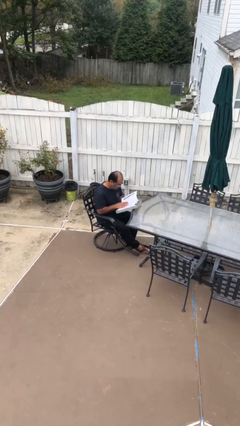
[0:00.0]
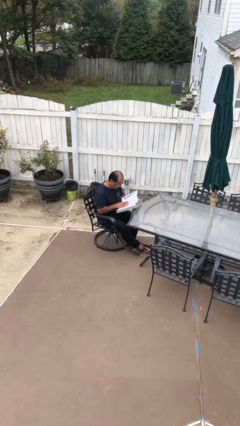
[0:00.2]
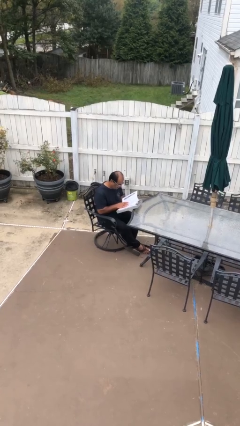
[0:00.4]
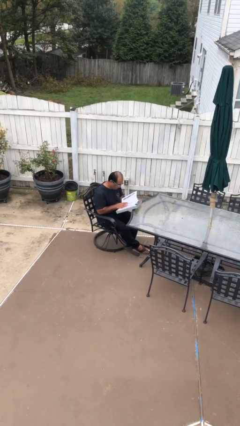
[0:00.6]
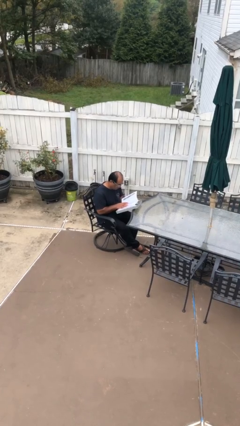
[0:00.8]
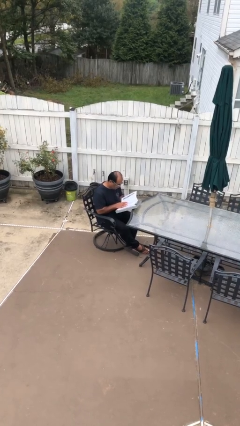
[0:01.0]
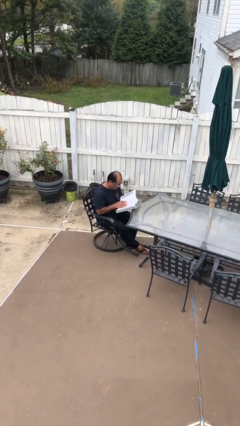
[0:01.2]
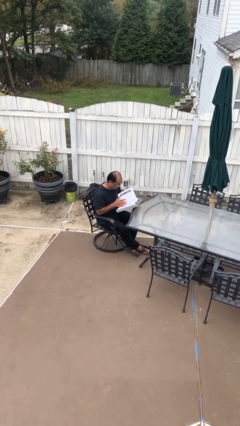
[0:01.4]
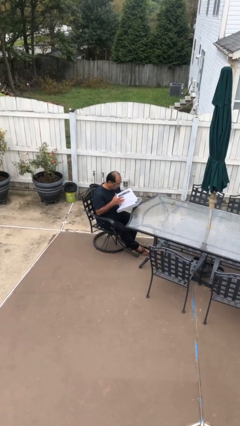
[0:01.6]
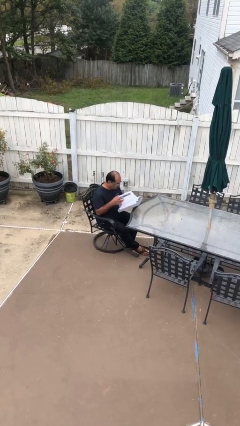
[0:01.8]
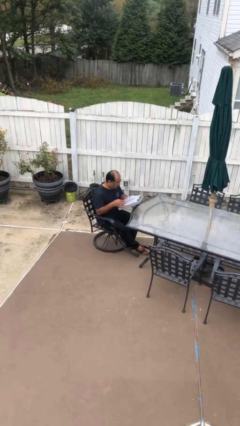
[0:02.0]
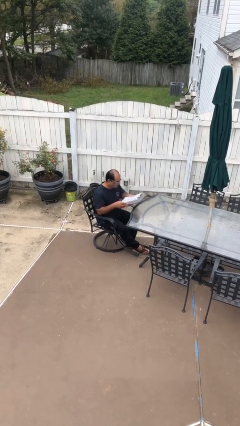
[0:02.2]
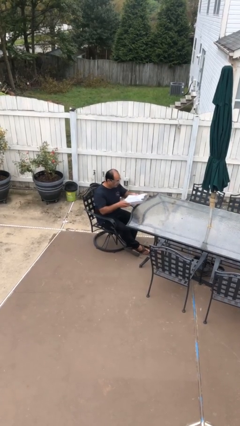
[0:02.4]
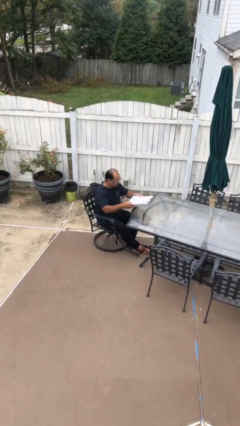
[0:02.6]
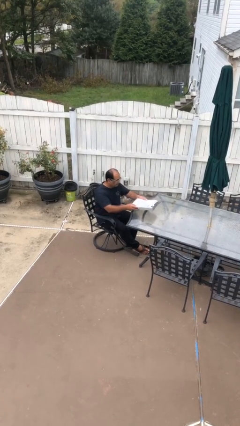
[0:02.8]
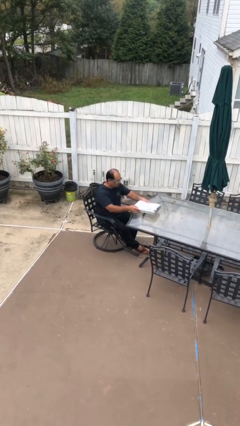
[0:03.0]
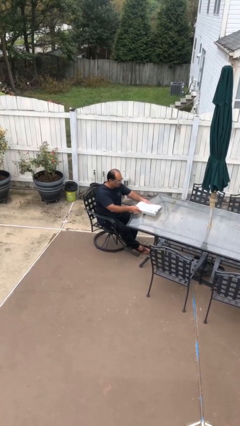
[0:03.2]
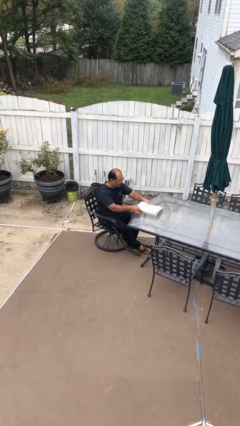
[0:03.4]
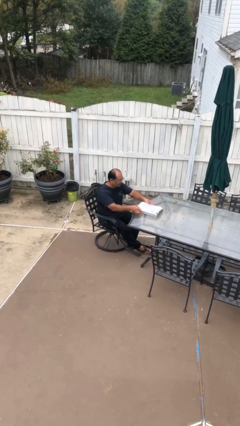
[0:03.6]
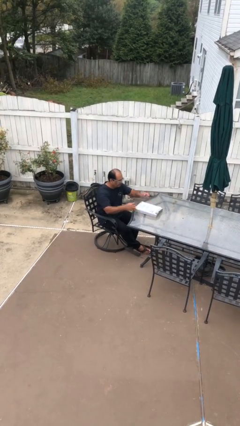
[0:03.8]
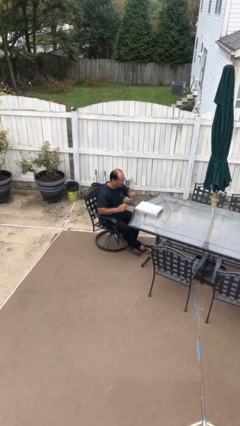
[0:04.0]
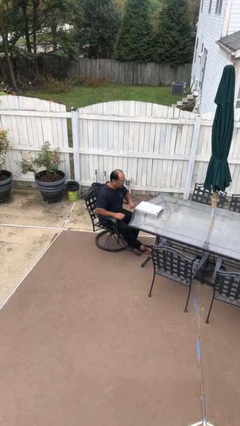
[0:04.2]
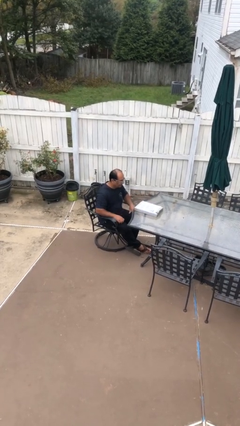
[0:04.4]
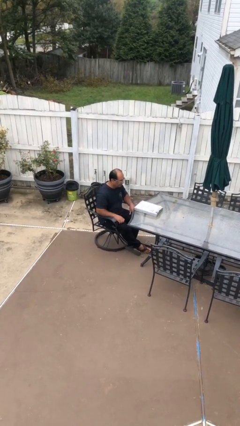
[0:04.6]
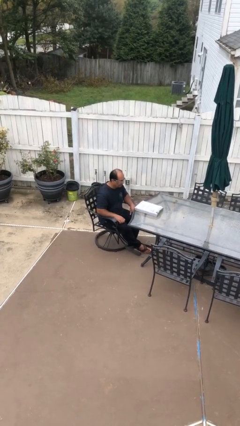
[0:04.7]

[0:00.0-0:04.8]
person puts down object on table

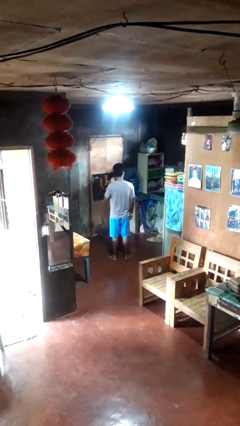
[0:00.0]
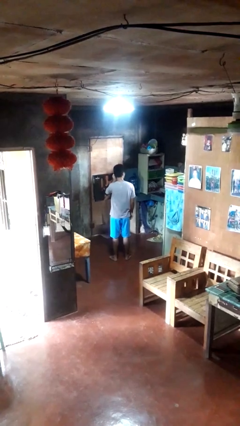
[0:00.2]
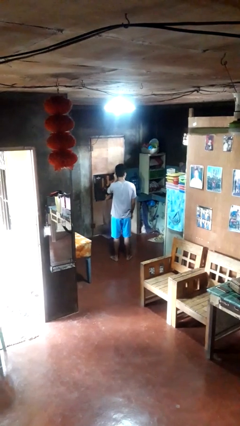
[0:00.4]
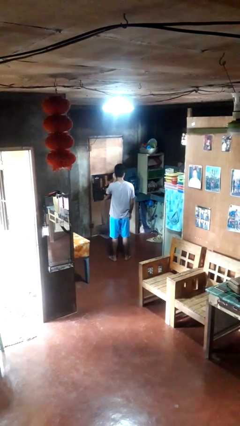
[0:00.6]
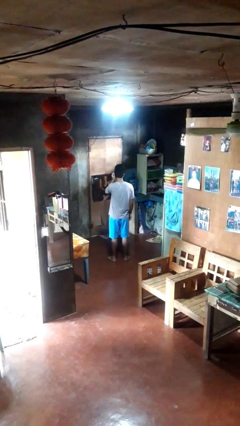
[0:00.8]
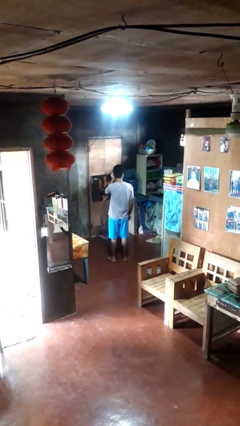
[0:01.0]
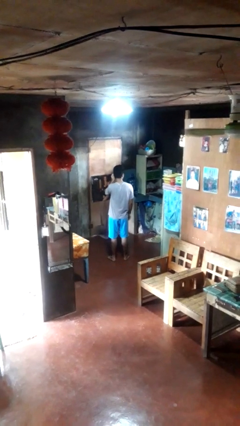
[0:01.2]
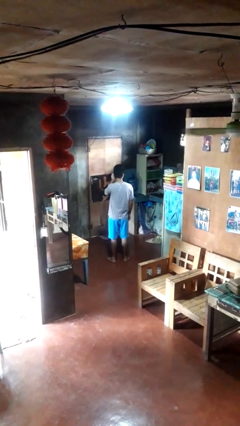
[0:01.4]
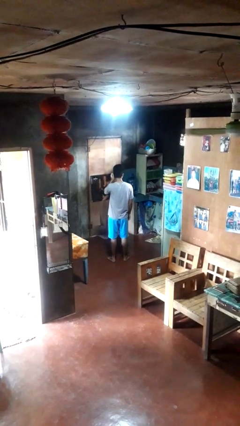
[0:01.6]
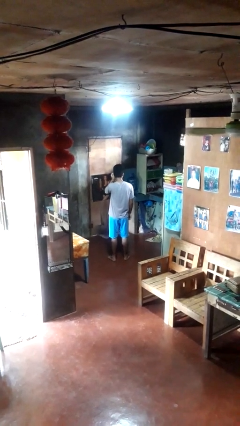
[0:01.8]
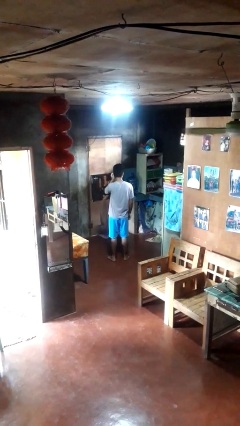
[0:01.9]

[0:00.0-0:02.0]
person touches earlobe

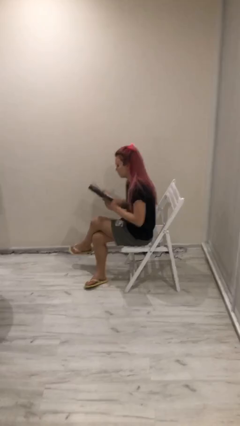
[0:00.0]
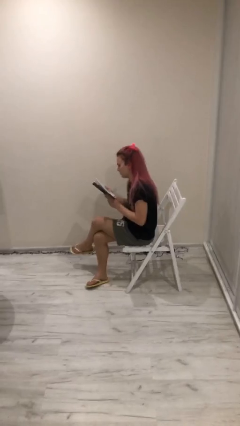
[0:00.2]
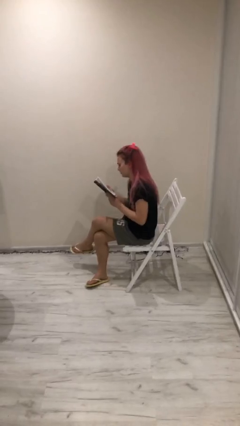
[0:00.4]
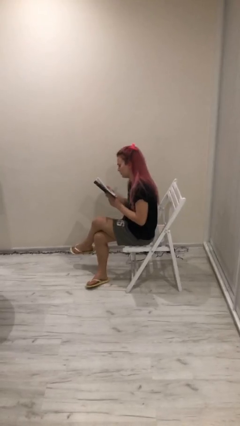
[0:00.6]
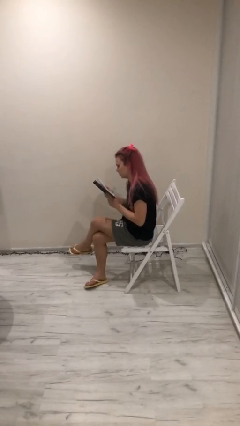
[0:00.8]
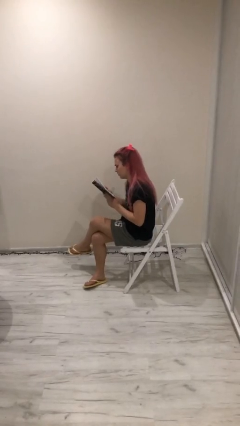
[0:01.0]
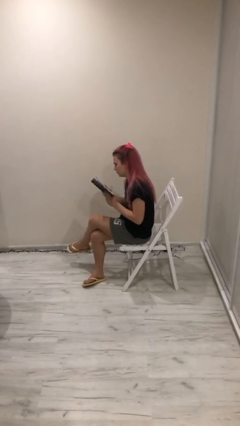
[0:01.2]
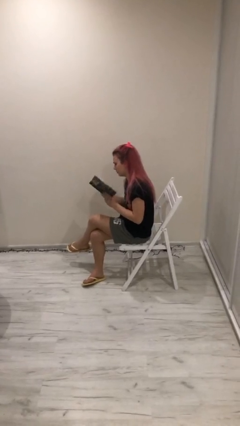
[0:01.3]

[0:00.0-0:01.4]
person reads document

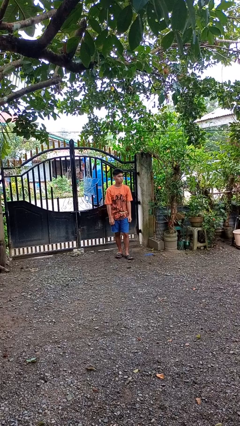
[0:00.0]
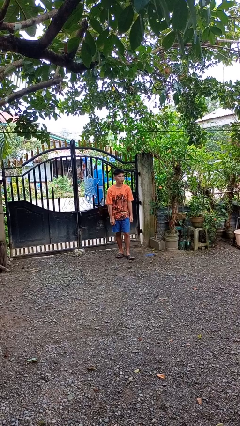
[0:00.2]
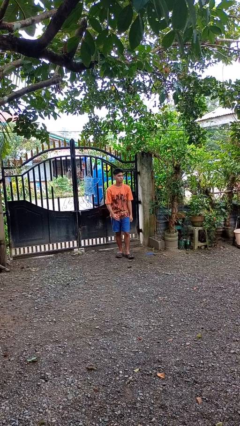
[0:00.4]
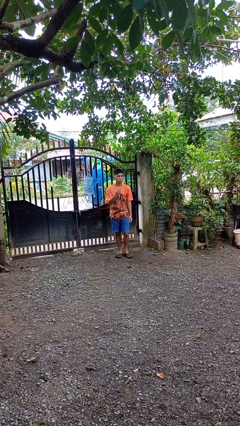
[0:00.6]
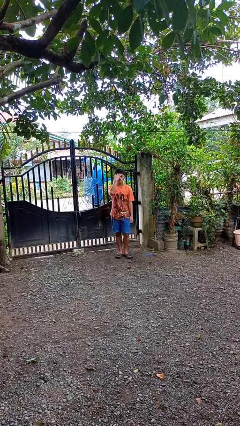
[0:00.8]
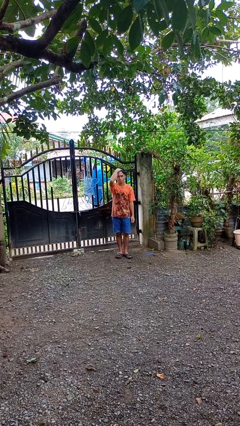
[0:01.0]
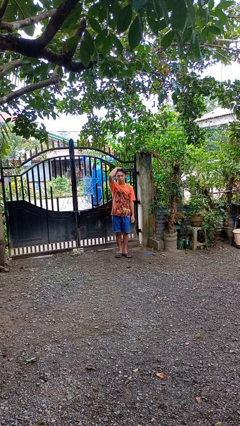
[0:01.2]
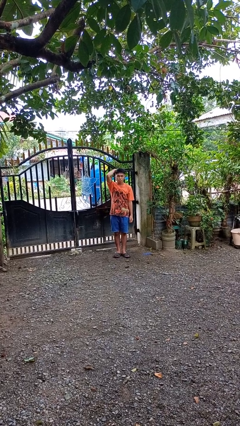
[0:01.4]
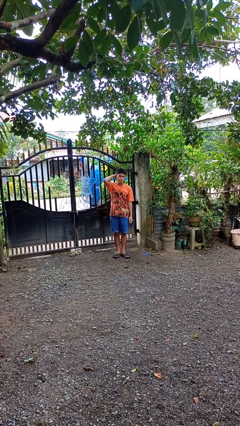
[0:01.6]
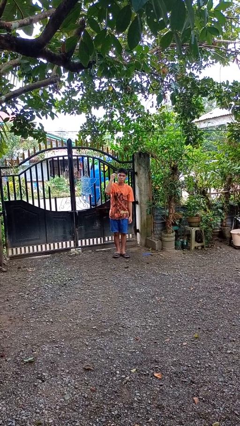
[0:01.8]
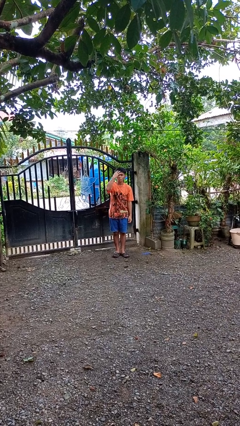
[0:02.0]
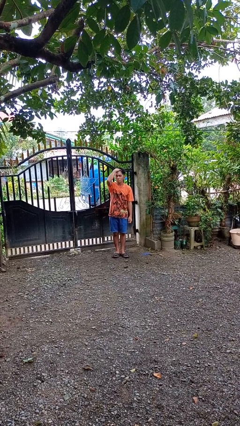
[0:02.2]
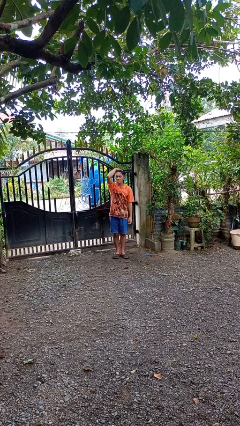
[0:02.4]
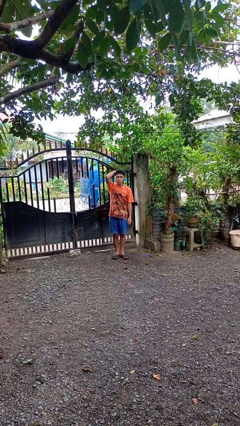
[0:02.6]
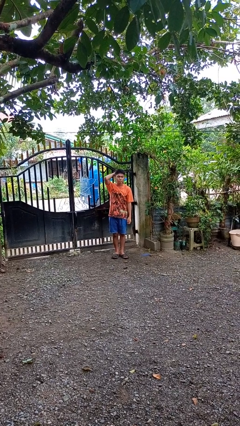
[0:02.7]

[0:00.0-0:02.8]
person strokes hair

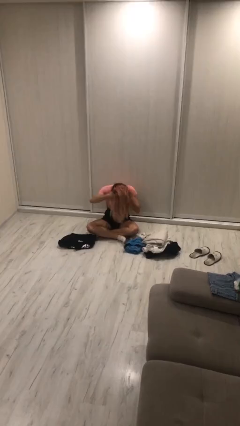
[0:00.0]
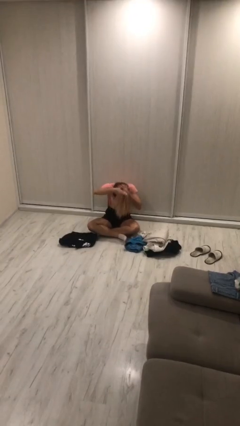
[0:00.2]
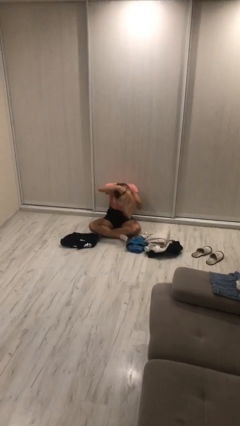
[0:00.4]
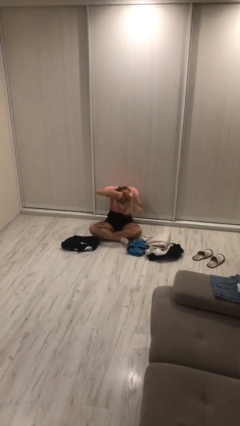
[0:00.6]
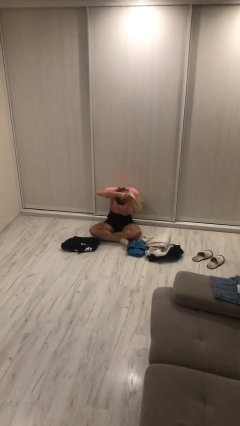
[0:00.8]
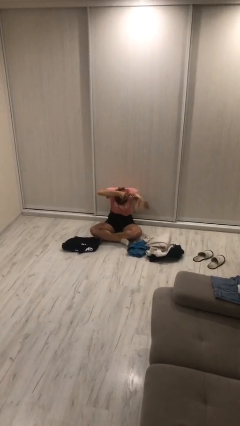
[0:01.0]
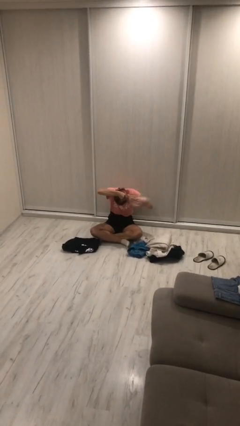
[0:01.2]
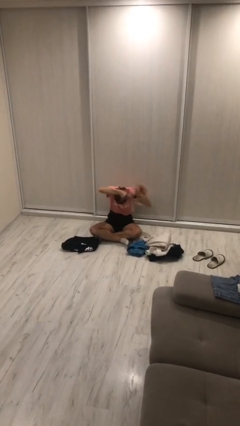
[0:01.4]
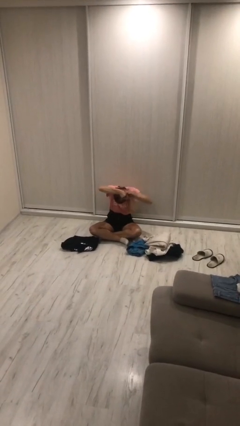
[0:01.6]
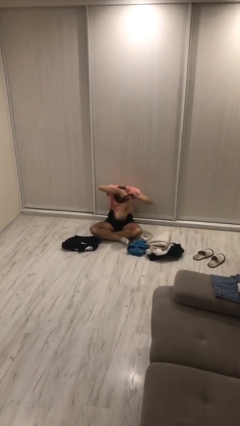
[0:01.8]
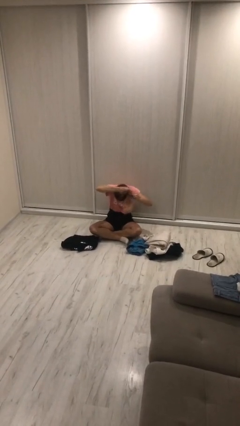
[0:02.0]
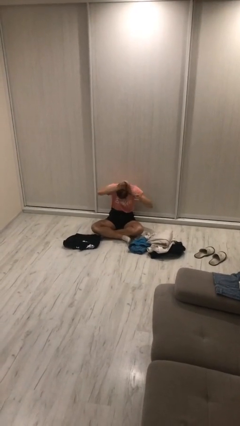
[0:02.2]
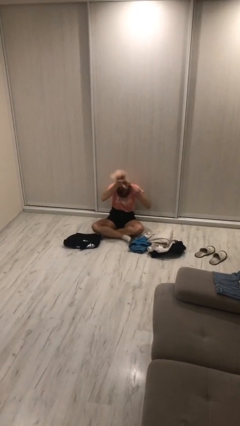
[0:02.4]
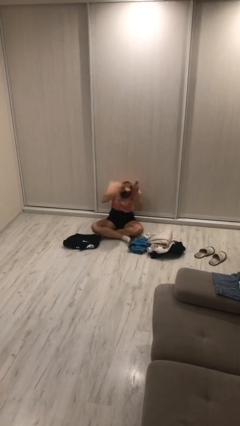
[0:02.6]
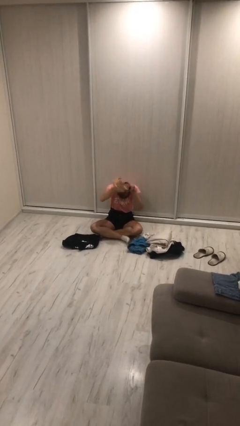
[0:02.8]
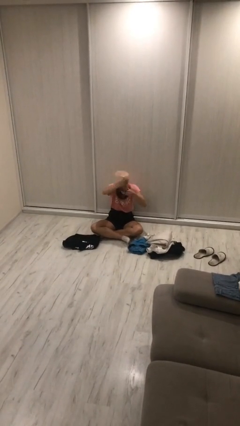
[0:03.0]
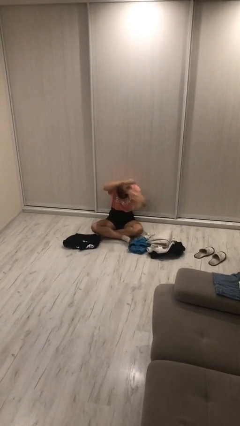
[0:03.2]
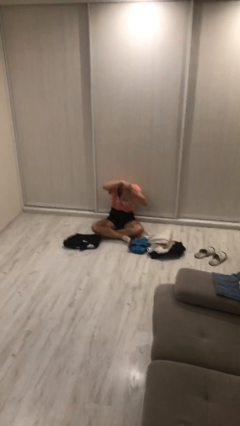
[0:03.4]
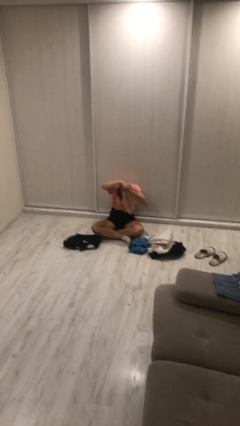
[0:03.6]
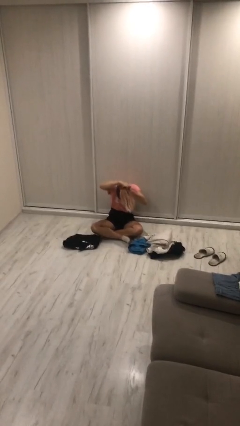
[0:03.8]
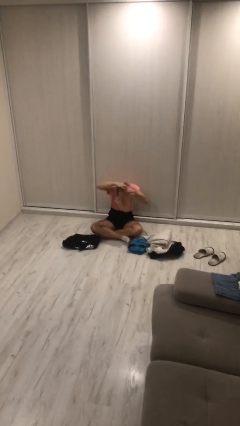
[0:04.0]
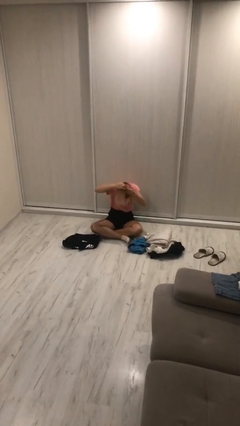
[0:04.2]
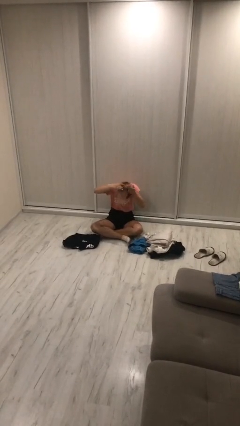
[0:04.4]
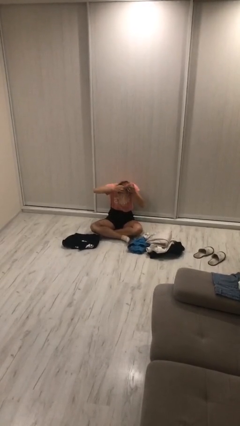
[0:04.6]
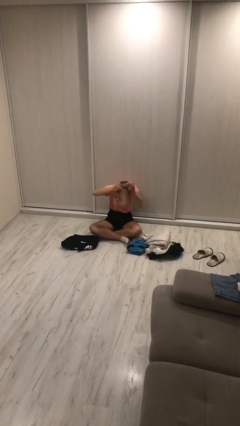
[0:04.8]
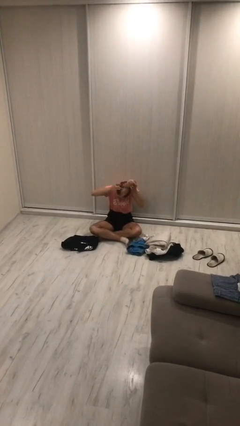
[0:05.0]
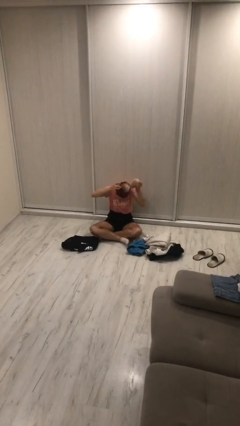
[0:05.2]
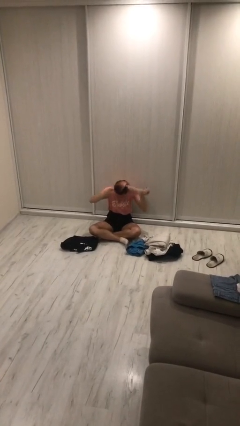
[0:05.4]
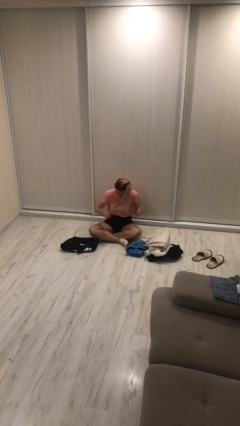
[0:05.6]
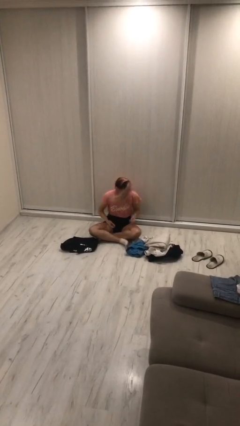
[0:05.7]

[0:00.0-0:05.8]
person puts hair in ponytail

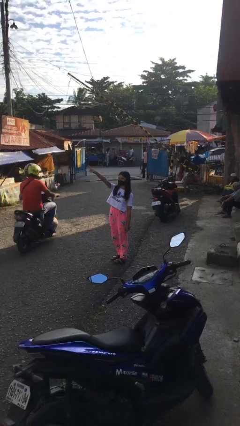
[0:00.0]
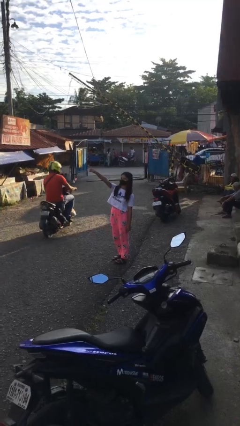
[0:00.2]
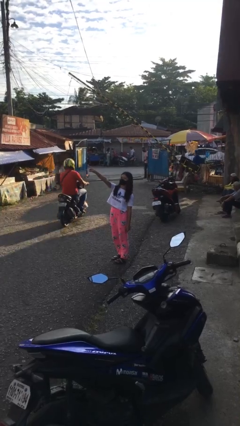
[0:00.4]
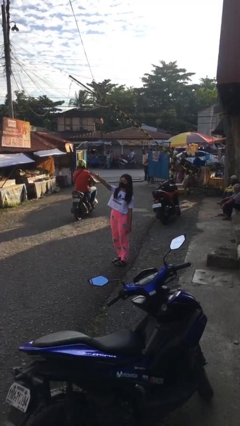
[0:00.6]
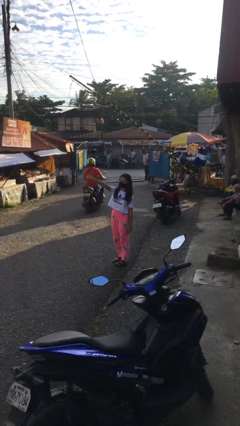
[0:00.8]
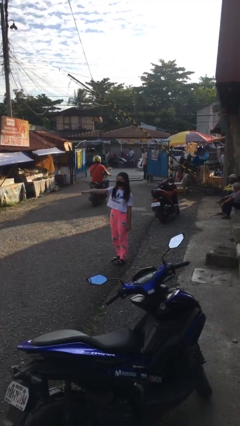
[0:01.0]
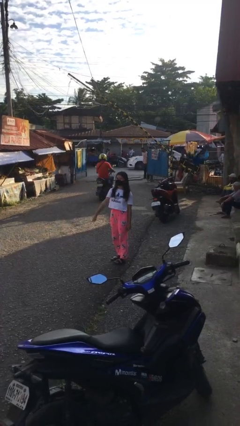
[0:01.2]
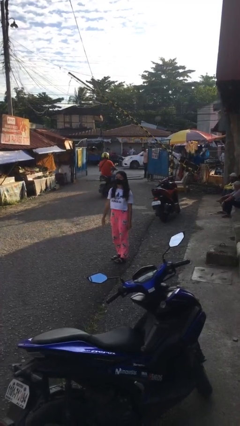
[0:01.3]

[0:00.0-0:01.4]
person points at person
